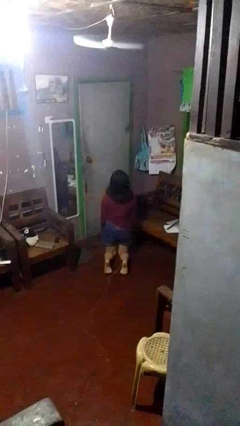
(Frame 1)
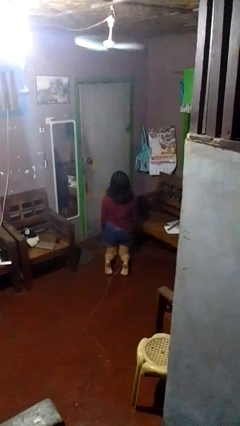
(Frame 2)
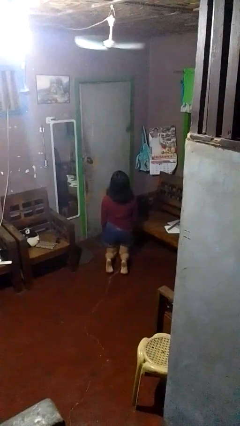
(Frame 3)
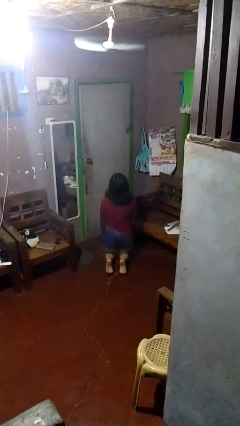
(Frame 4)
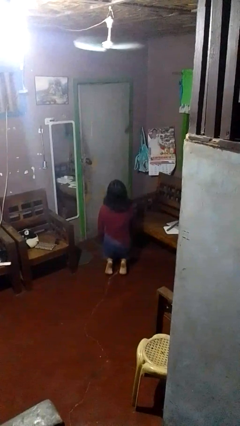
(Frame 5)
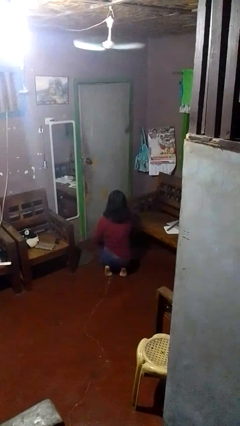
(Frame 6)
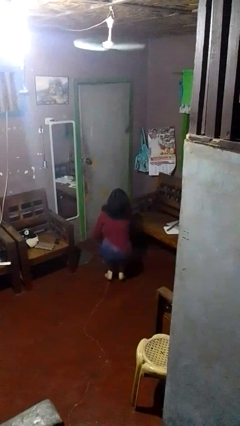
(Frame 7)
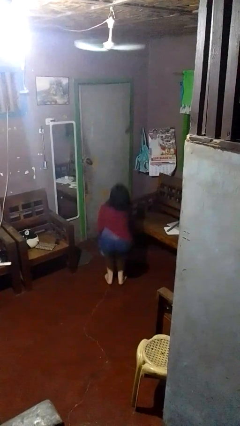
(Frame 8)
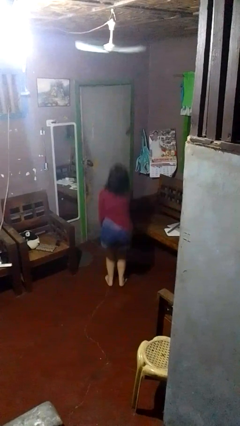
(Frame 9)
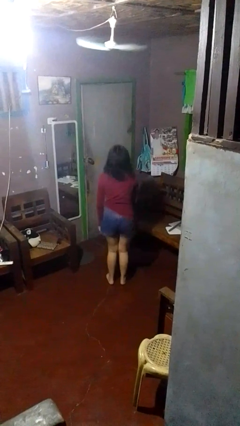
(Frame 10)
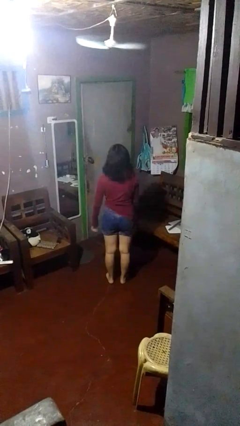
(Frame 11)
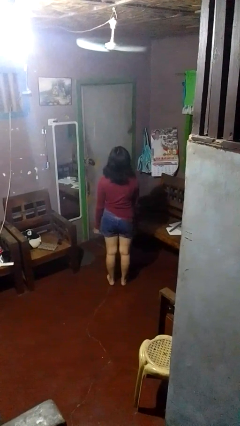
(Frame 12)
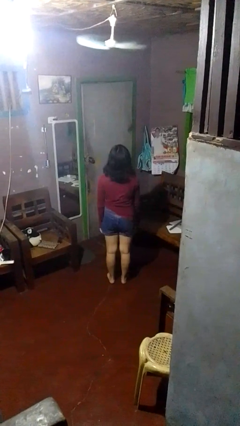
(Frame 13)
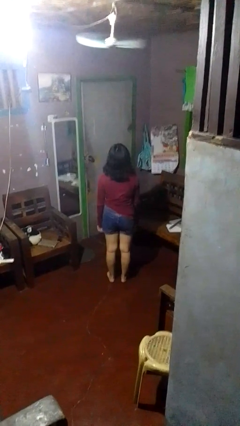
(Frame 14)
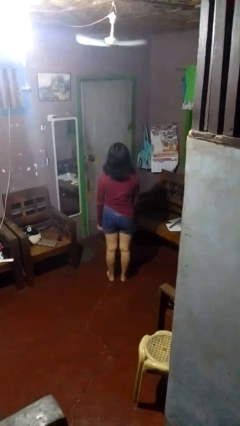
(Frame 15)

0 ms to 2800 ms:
person stands up from floor

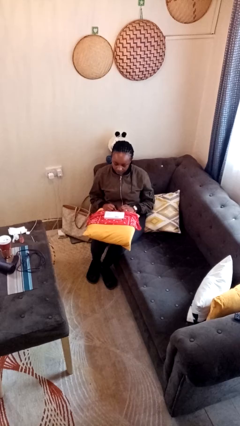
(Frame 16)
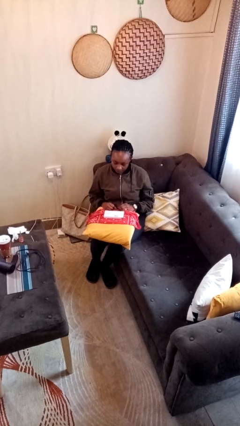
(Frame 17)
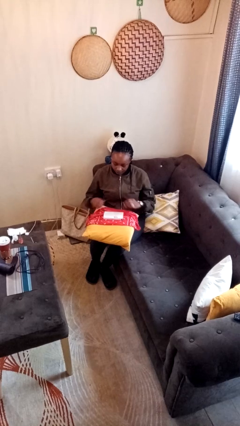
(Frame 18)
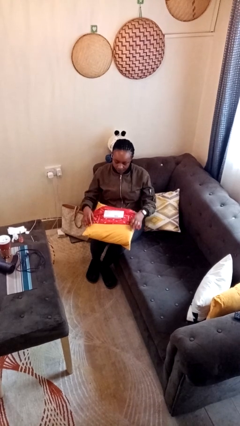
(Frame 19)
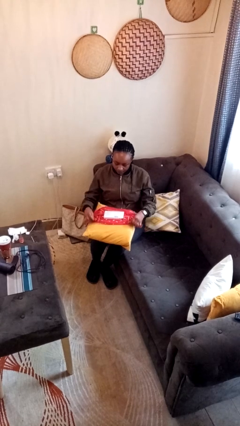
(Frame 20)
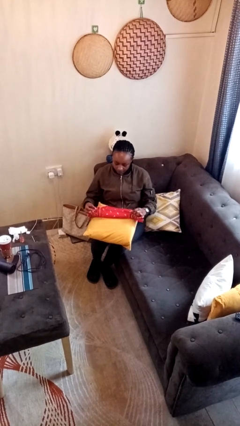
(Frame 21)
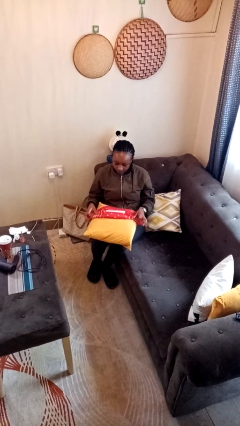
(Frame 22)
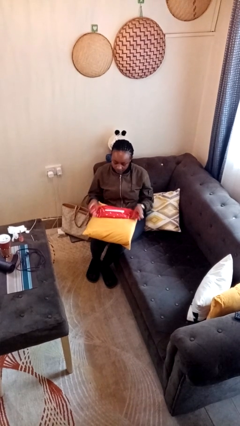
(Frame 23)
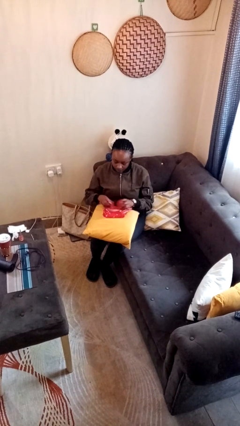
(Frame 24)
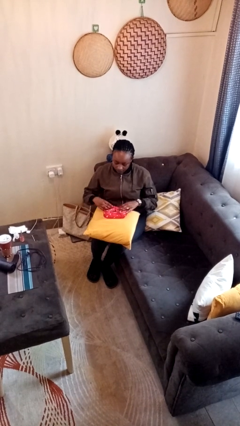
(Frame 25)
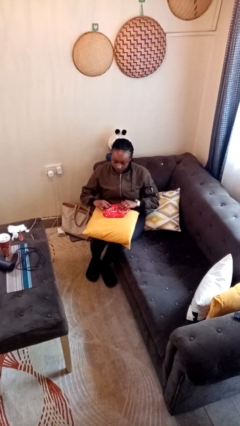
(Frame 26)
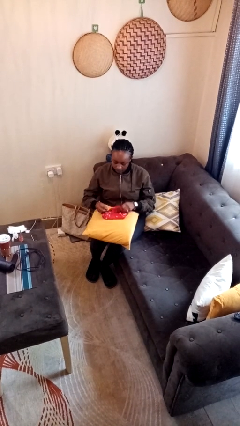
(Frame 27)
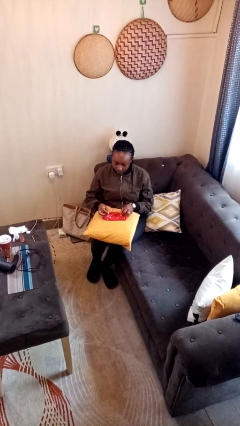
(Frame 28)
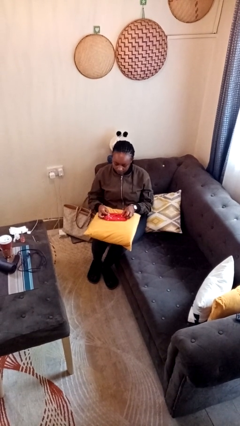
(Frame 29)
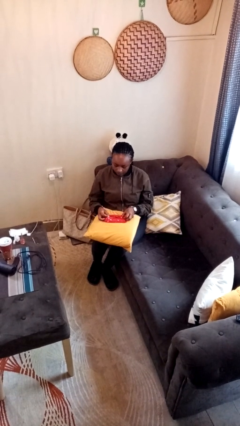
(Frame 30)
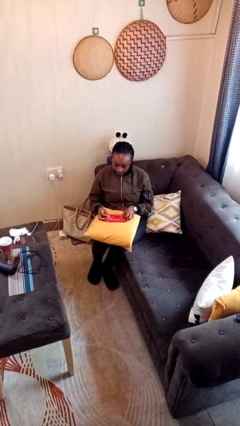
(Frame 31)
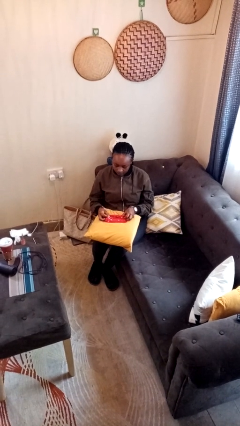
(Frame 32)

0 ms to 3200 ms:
person wraps box

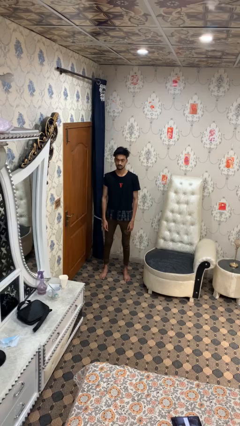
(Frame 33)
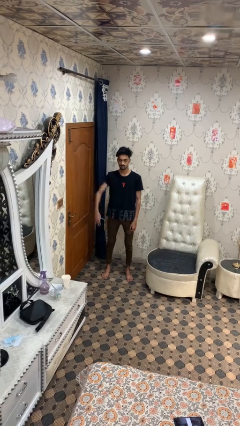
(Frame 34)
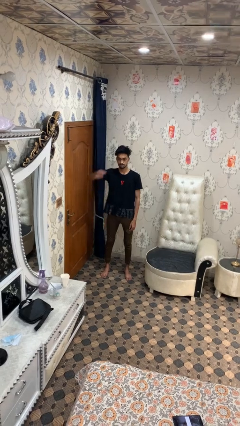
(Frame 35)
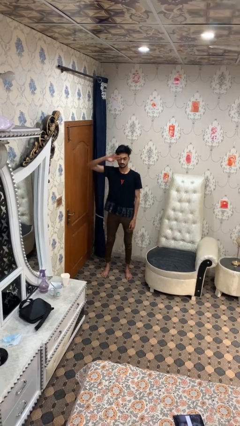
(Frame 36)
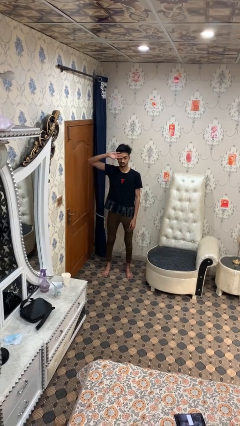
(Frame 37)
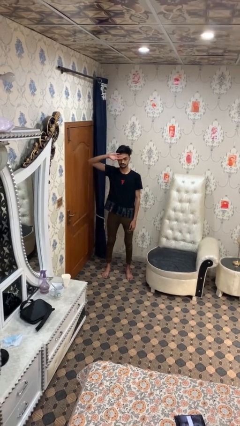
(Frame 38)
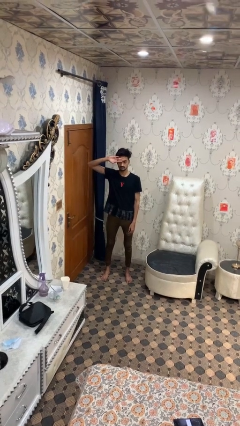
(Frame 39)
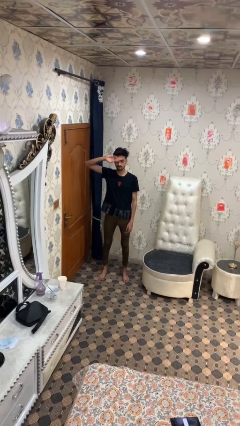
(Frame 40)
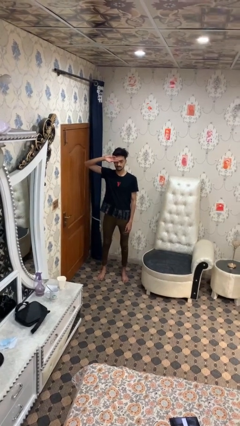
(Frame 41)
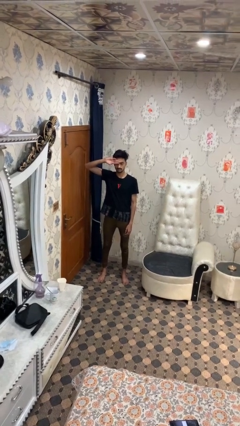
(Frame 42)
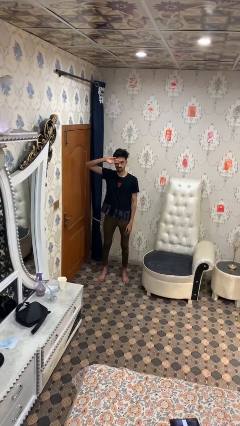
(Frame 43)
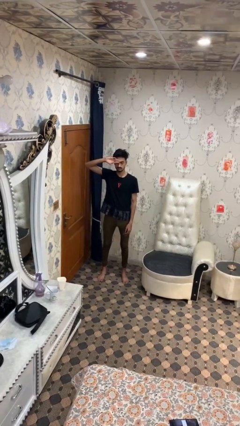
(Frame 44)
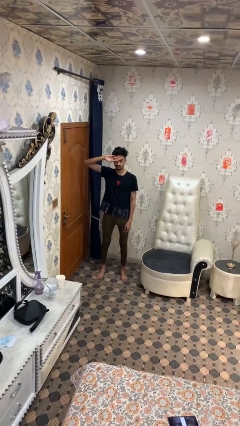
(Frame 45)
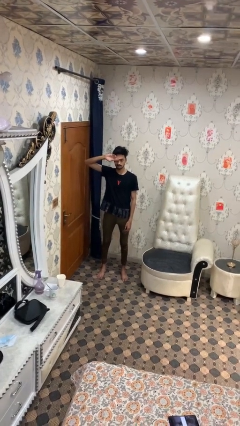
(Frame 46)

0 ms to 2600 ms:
person salutes

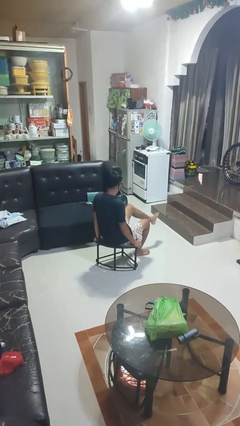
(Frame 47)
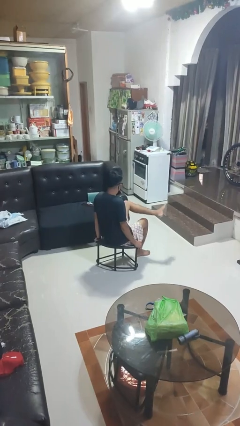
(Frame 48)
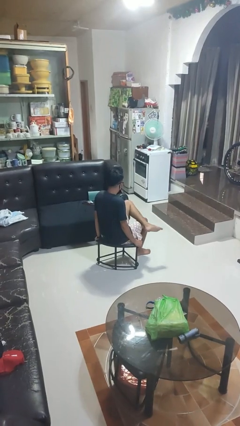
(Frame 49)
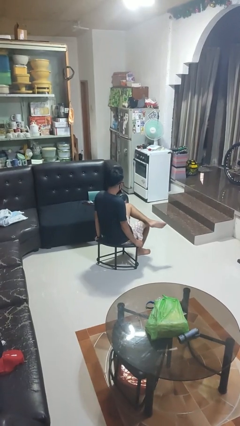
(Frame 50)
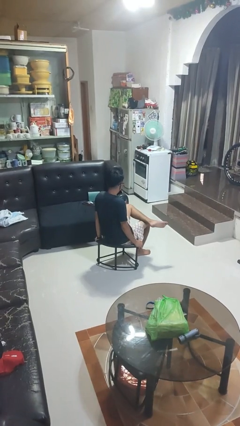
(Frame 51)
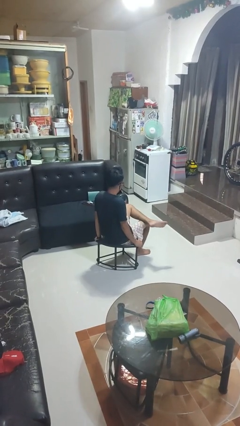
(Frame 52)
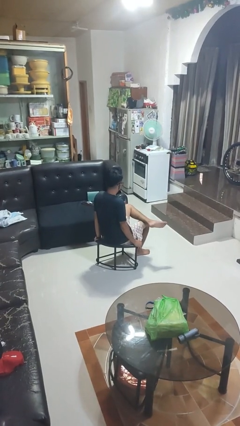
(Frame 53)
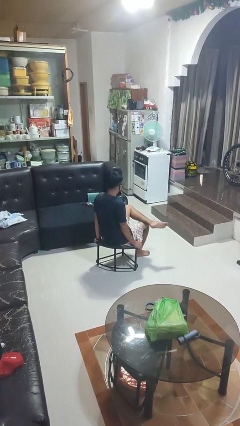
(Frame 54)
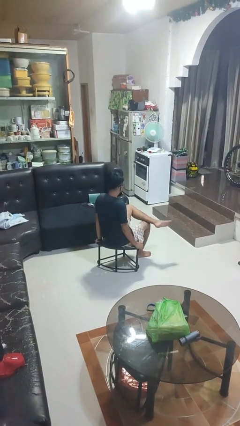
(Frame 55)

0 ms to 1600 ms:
person crosses legs

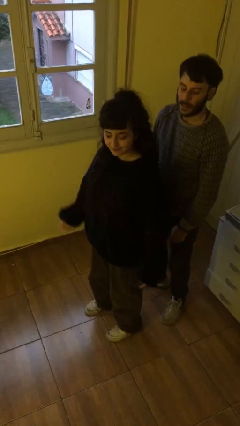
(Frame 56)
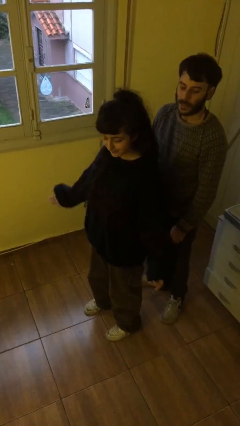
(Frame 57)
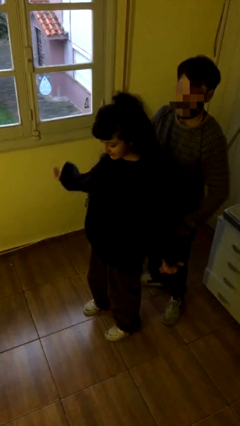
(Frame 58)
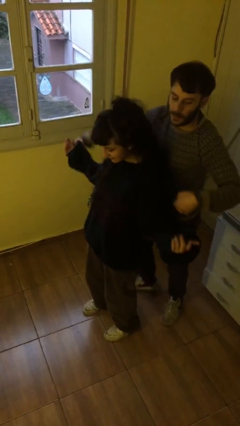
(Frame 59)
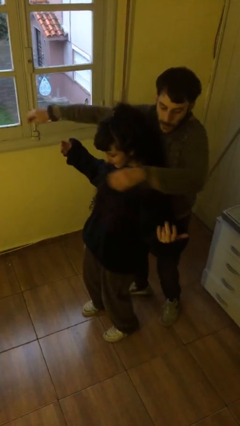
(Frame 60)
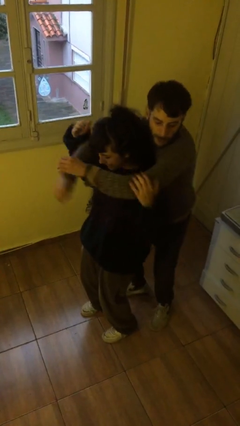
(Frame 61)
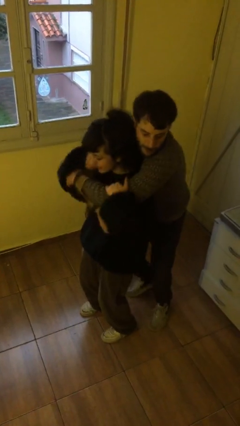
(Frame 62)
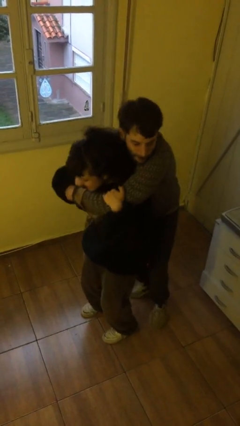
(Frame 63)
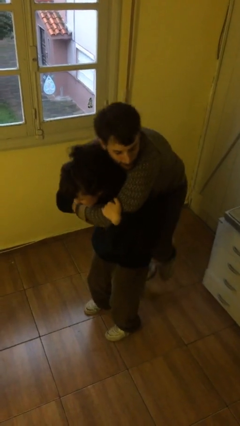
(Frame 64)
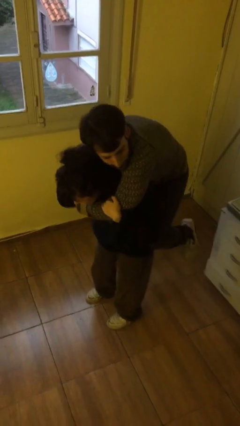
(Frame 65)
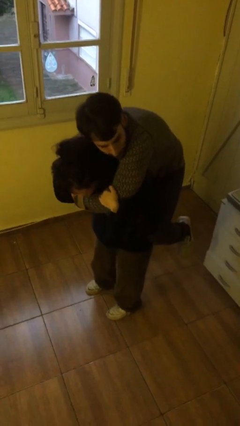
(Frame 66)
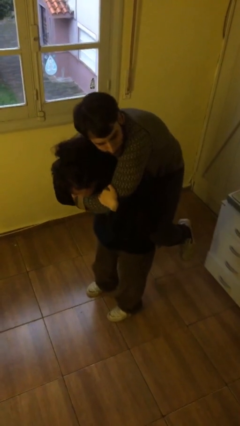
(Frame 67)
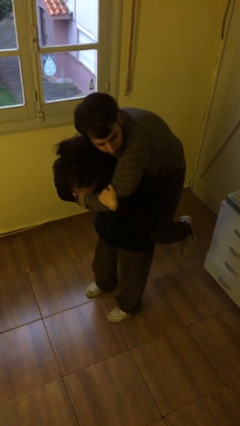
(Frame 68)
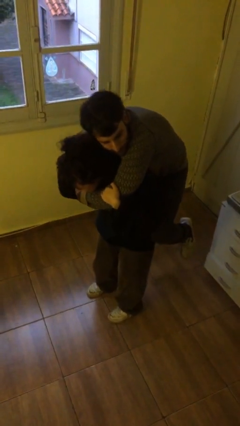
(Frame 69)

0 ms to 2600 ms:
person picks up person

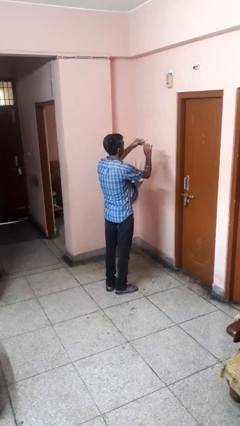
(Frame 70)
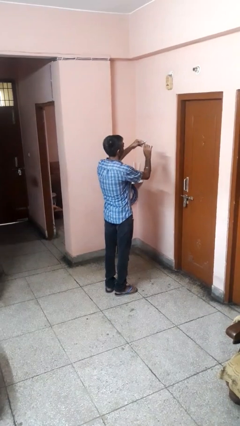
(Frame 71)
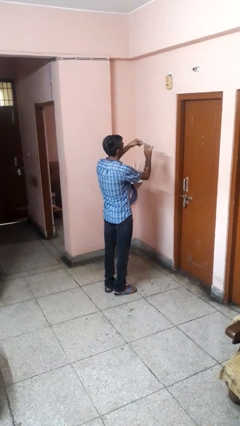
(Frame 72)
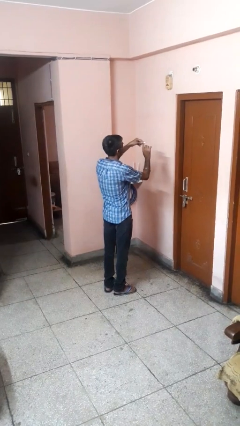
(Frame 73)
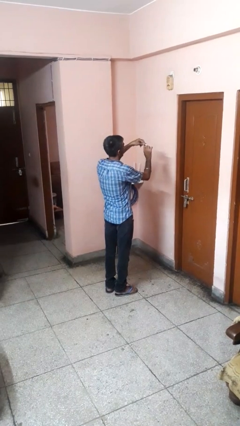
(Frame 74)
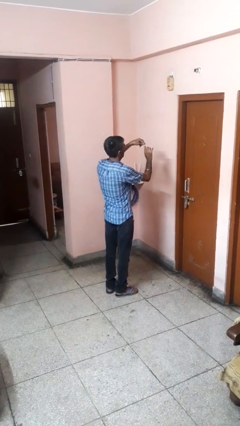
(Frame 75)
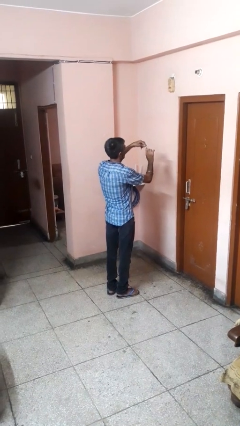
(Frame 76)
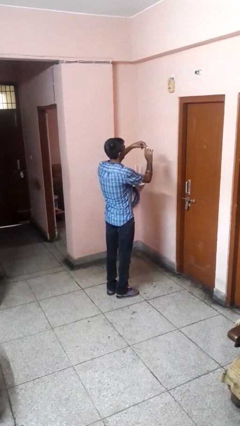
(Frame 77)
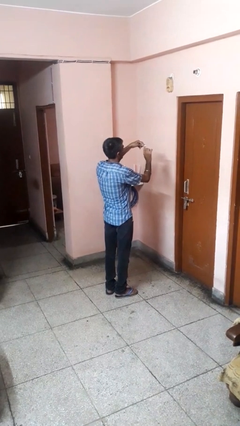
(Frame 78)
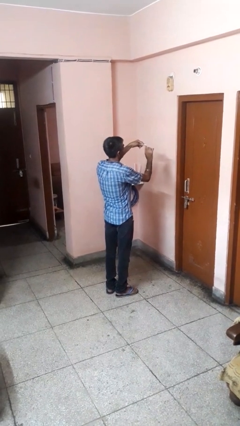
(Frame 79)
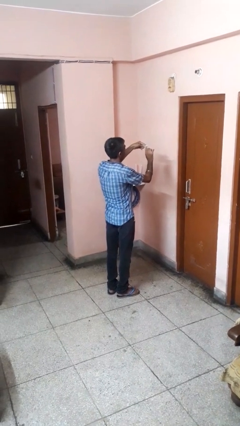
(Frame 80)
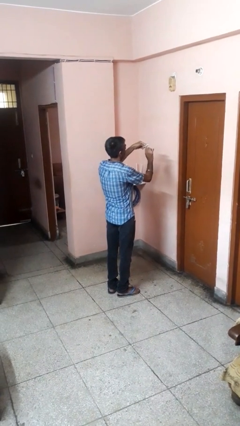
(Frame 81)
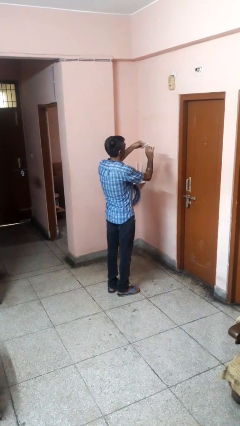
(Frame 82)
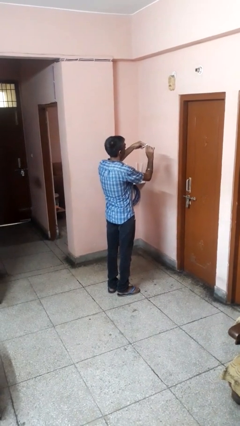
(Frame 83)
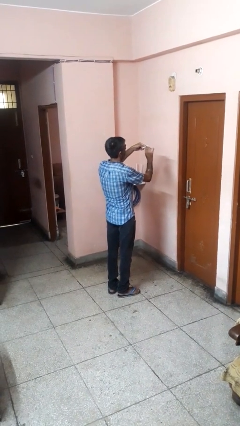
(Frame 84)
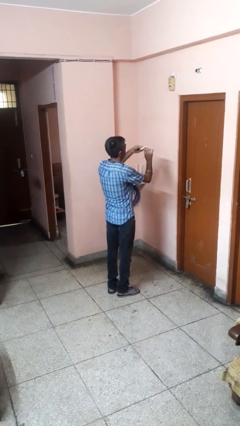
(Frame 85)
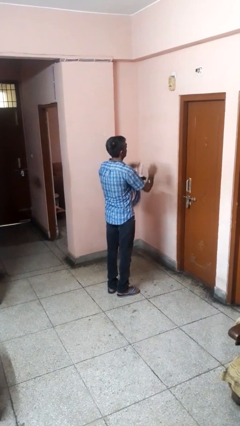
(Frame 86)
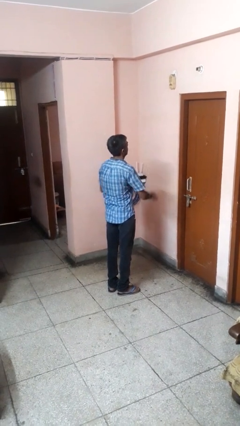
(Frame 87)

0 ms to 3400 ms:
person files fingernails

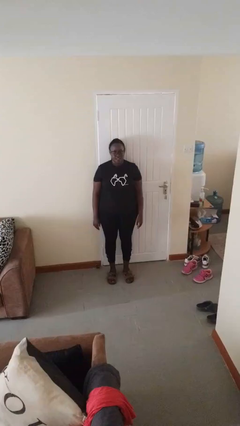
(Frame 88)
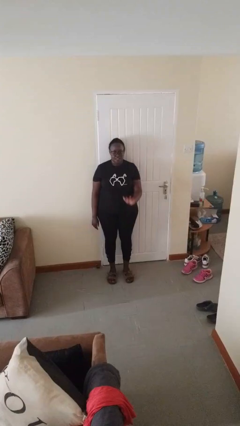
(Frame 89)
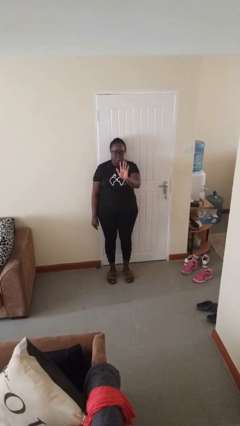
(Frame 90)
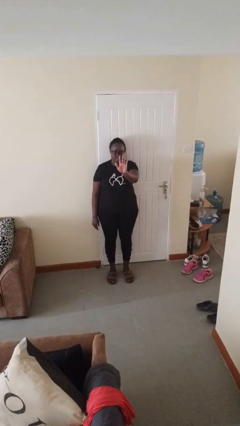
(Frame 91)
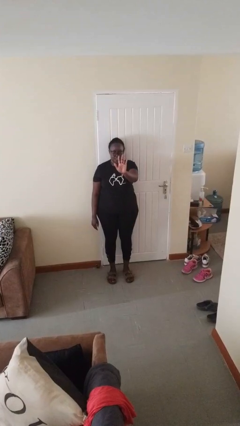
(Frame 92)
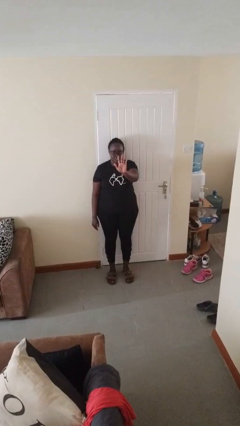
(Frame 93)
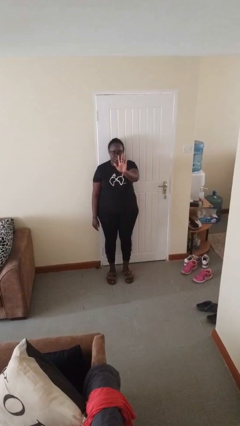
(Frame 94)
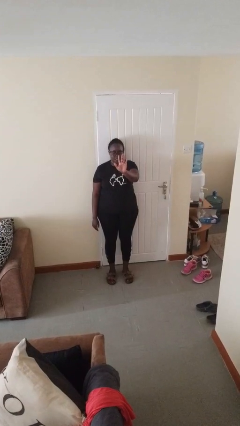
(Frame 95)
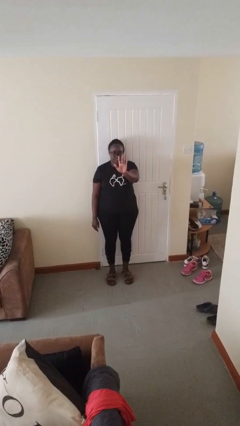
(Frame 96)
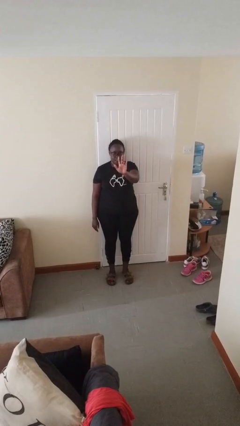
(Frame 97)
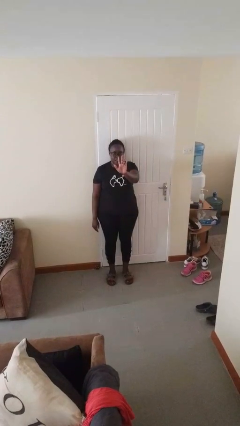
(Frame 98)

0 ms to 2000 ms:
person gestures number five
